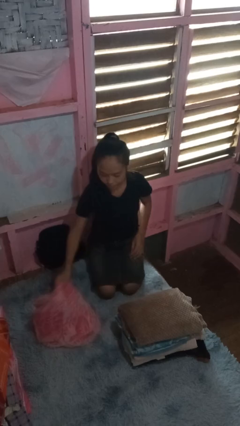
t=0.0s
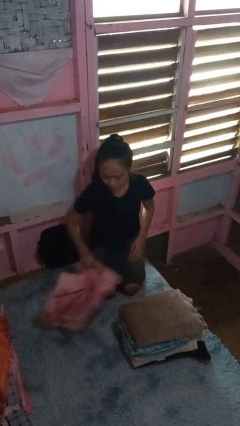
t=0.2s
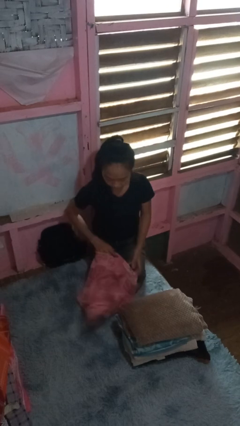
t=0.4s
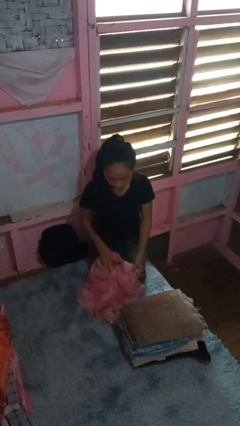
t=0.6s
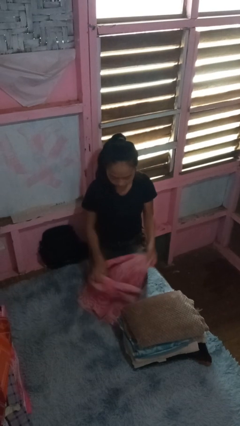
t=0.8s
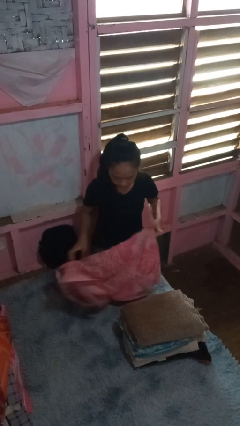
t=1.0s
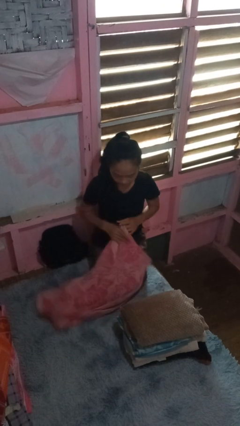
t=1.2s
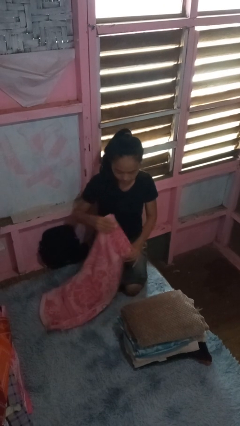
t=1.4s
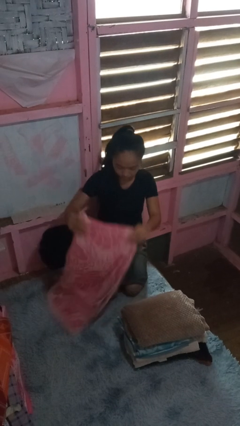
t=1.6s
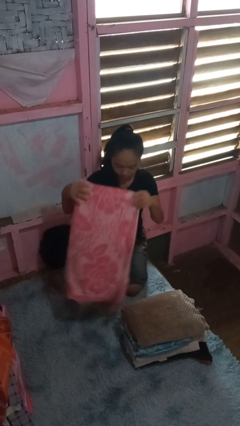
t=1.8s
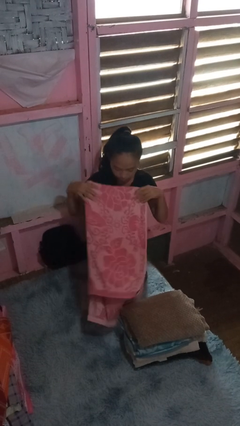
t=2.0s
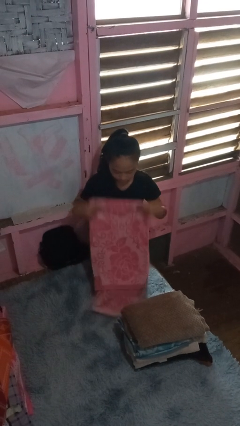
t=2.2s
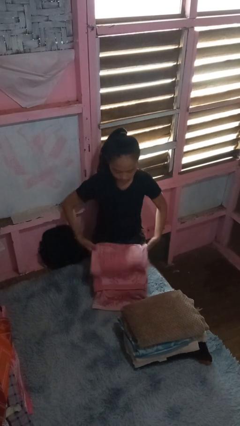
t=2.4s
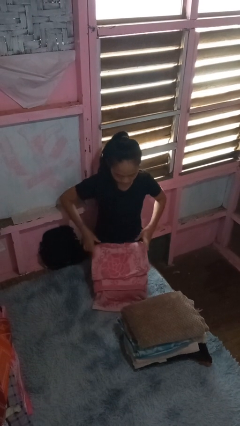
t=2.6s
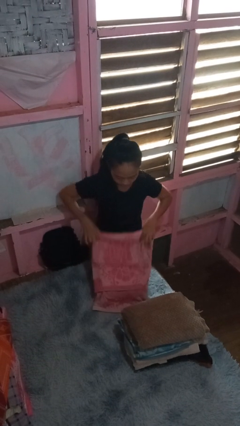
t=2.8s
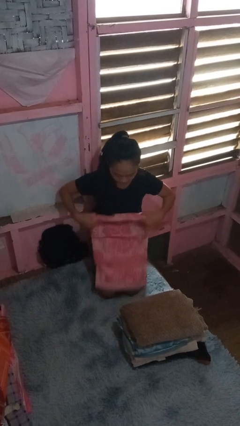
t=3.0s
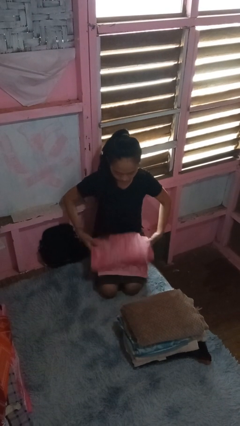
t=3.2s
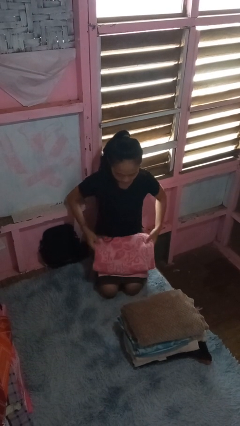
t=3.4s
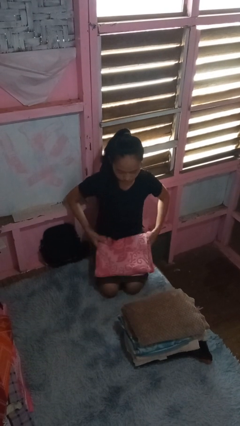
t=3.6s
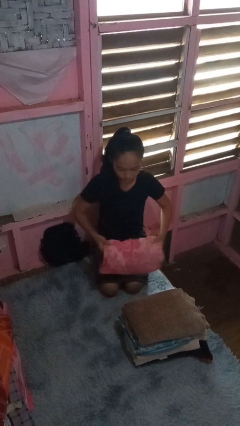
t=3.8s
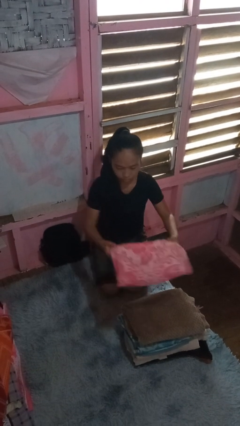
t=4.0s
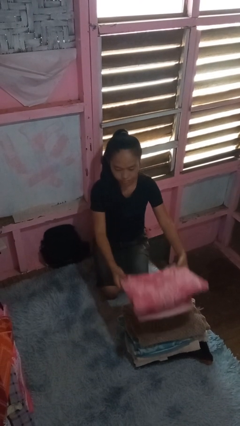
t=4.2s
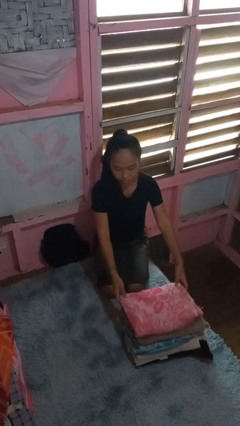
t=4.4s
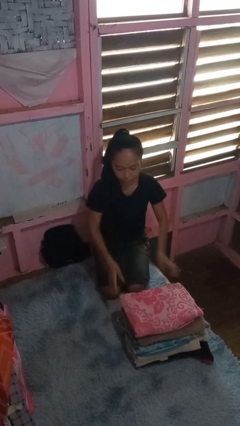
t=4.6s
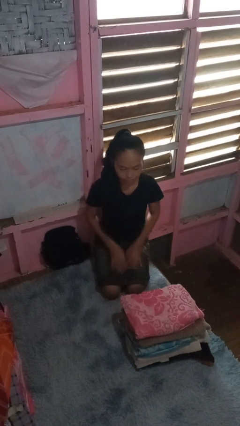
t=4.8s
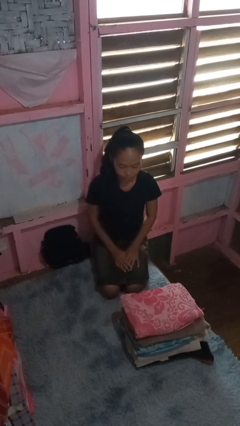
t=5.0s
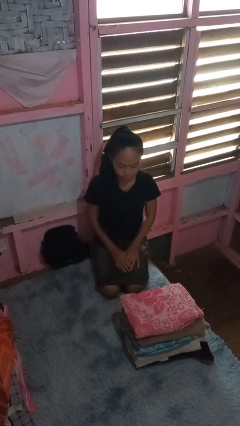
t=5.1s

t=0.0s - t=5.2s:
person folds towel

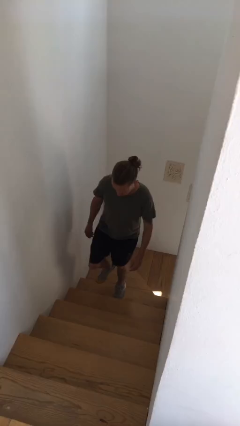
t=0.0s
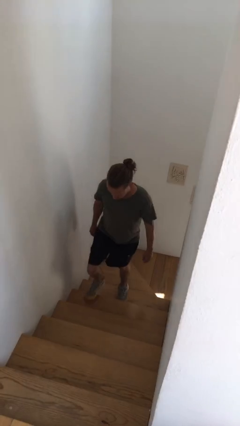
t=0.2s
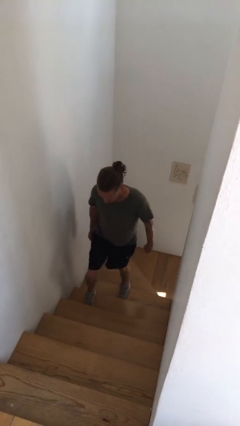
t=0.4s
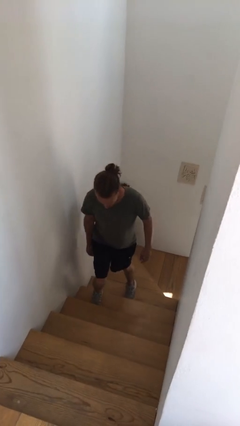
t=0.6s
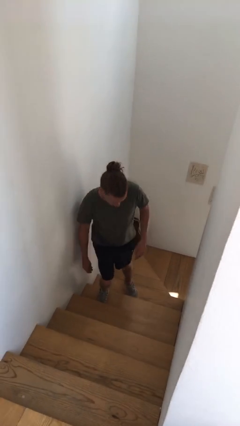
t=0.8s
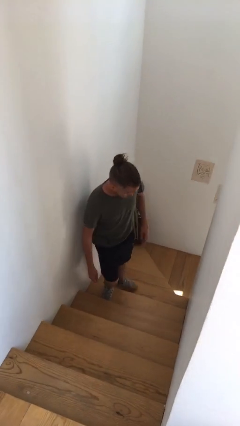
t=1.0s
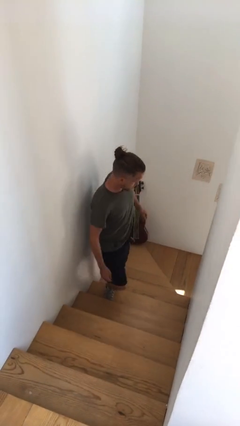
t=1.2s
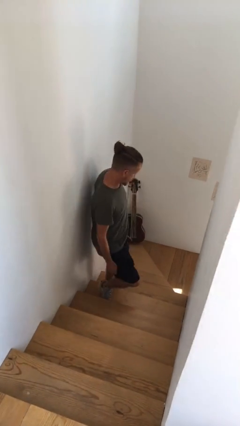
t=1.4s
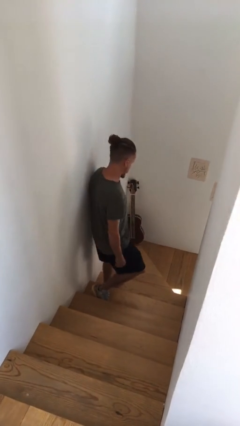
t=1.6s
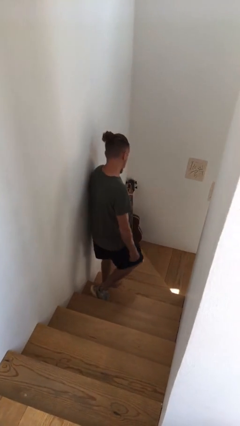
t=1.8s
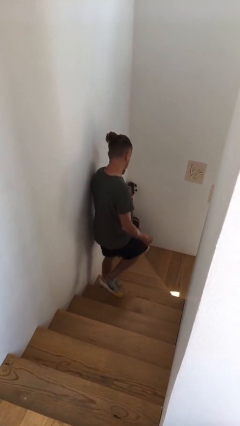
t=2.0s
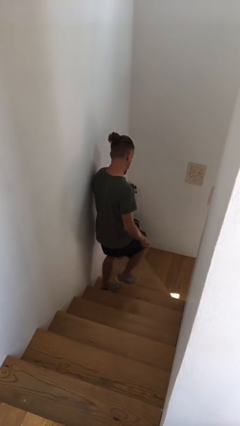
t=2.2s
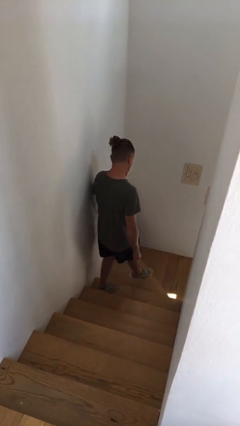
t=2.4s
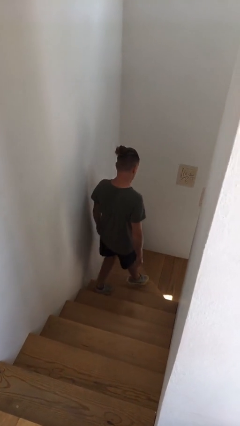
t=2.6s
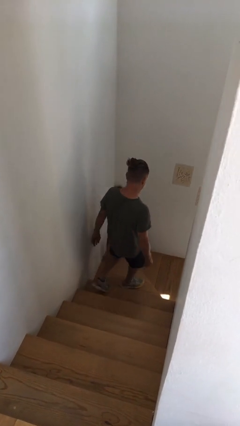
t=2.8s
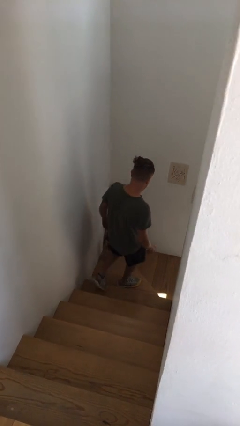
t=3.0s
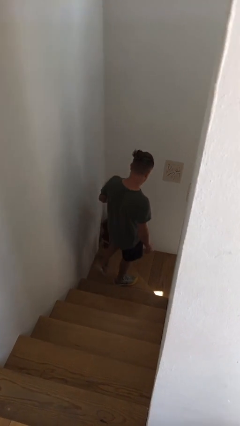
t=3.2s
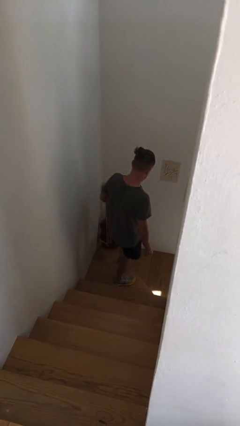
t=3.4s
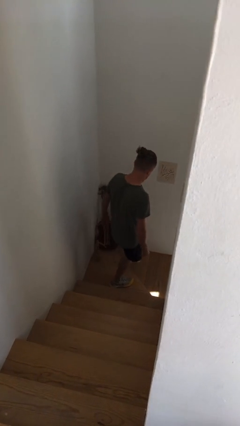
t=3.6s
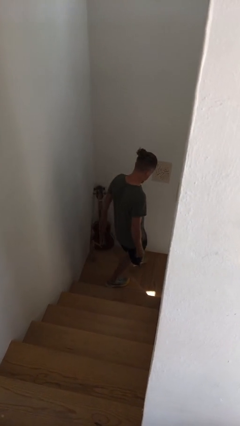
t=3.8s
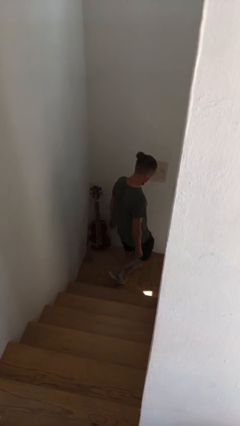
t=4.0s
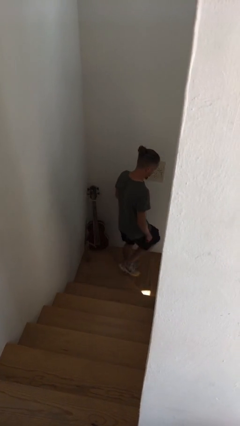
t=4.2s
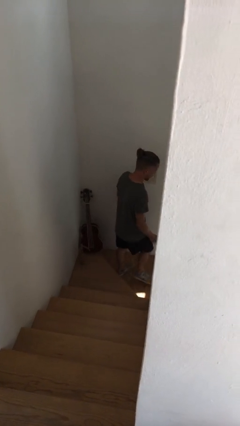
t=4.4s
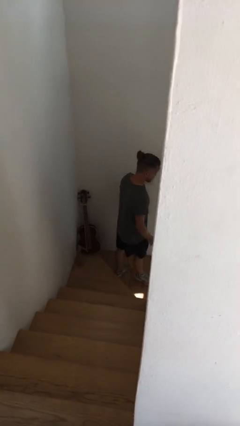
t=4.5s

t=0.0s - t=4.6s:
person climbs down stairs

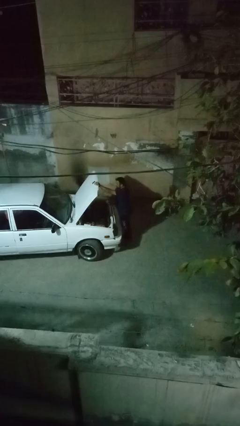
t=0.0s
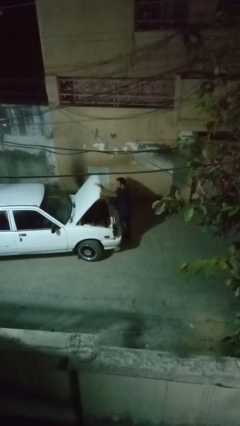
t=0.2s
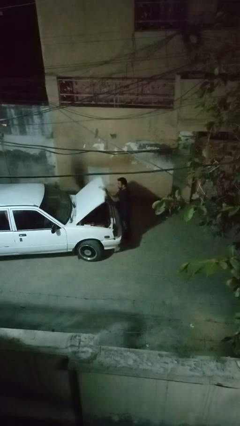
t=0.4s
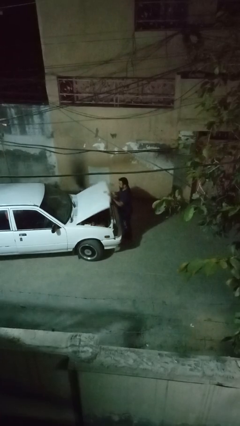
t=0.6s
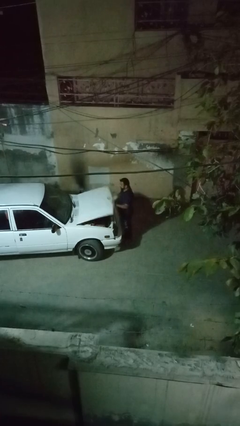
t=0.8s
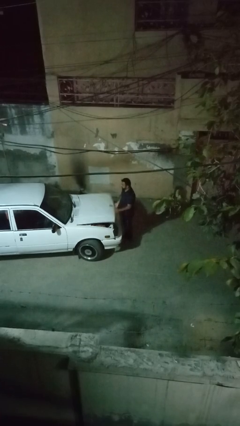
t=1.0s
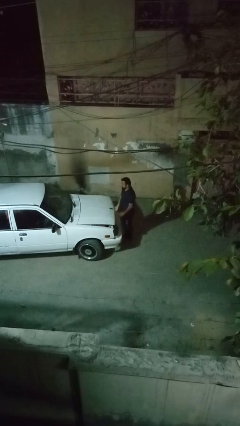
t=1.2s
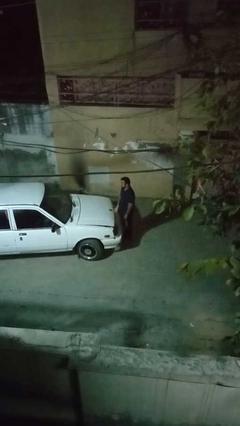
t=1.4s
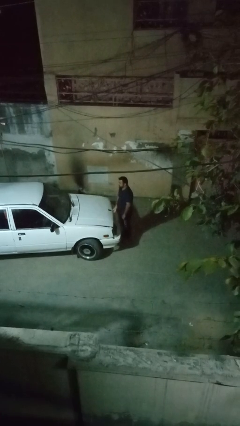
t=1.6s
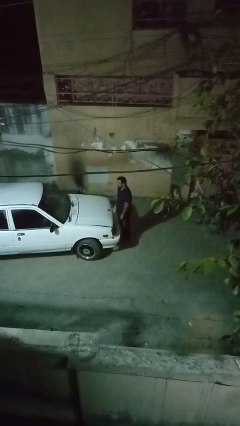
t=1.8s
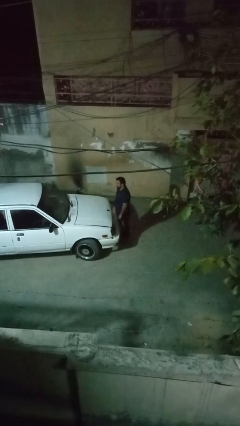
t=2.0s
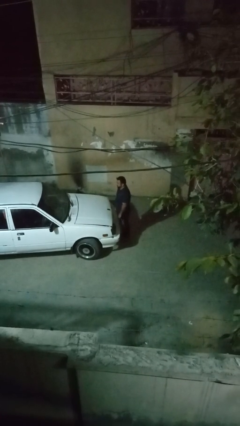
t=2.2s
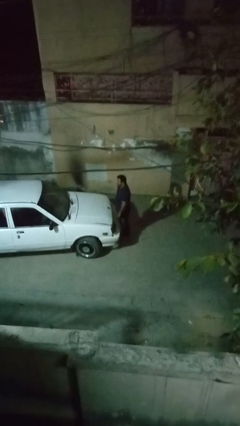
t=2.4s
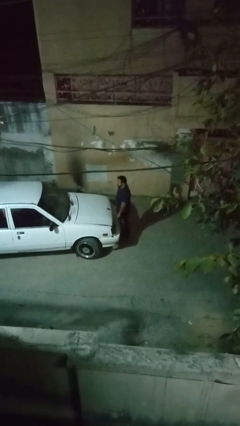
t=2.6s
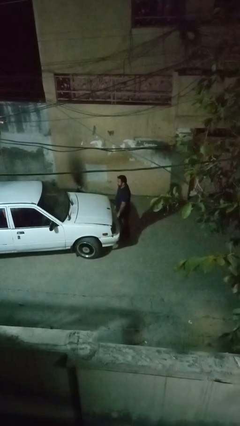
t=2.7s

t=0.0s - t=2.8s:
person closes car hood

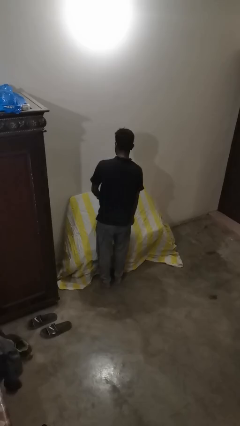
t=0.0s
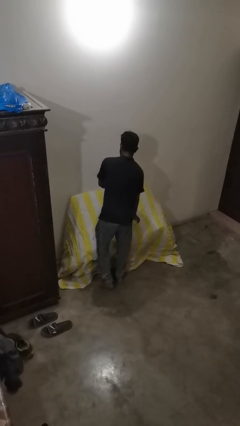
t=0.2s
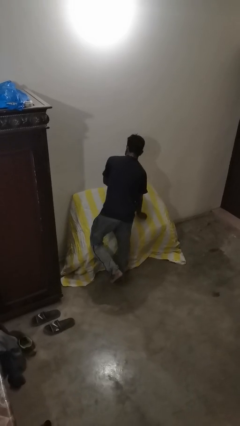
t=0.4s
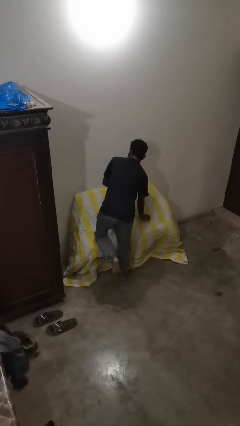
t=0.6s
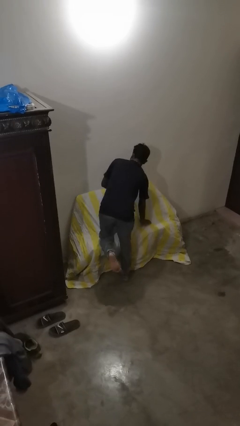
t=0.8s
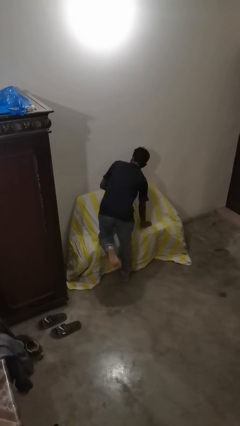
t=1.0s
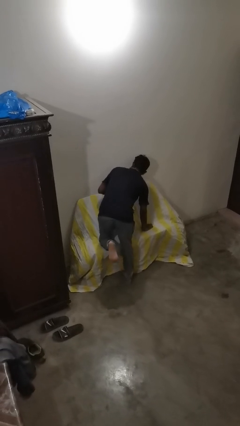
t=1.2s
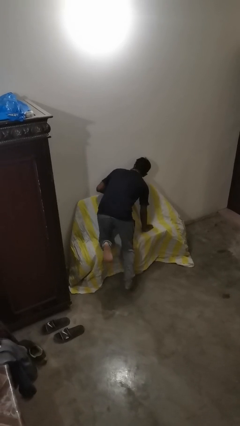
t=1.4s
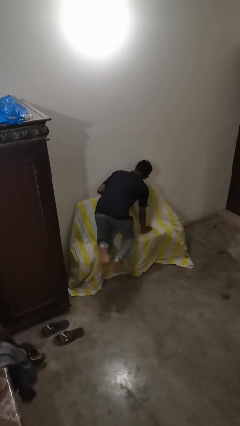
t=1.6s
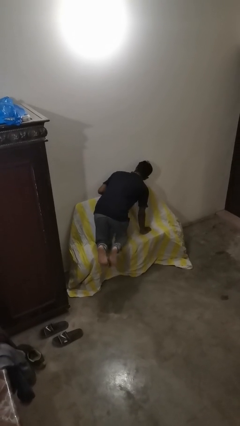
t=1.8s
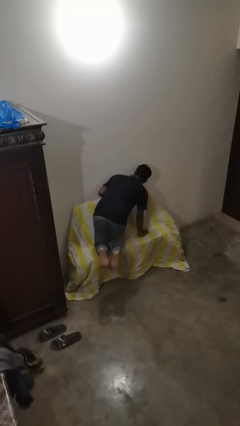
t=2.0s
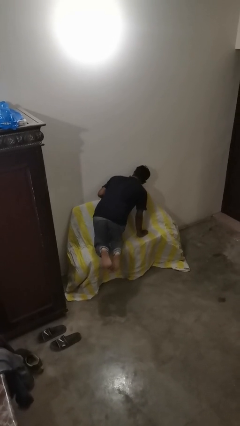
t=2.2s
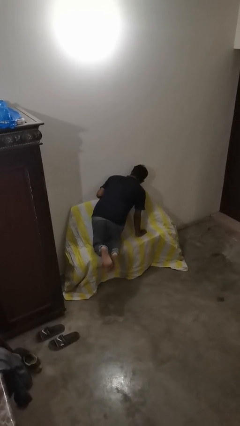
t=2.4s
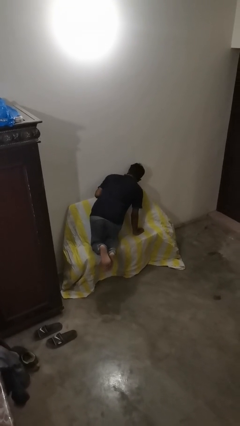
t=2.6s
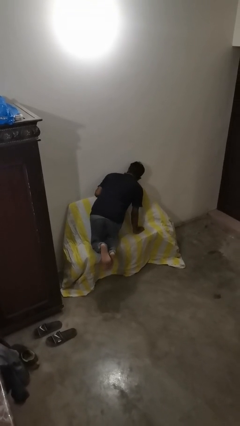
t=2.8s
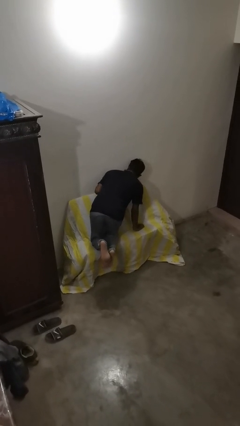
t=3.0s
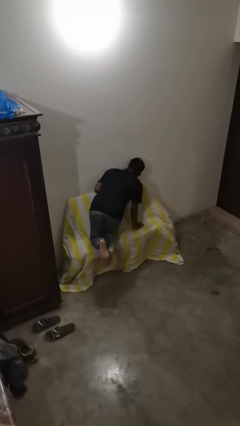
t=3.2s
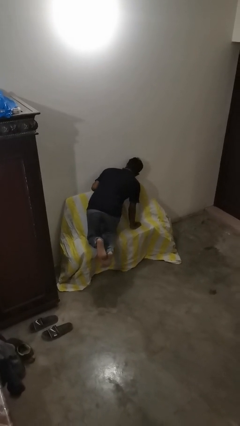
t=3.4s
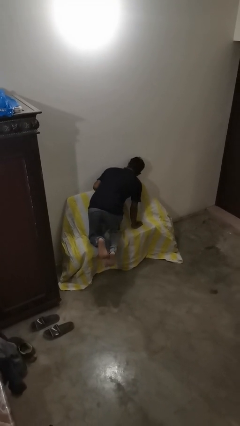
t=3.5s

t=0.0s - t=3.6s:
person lies down on couch

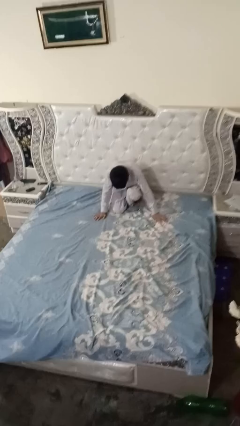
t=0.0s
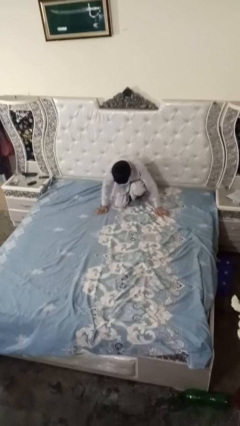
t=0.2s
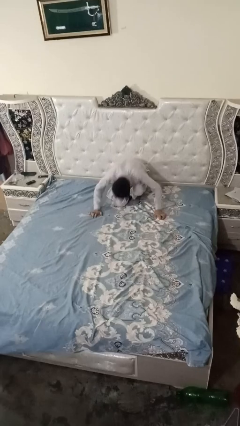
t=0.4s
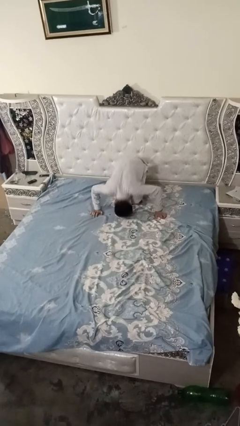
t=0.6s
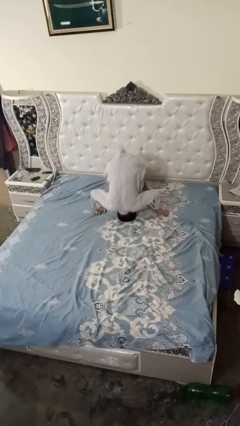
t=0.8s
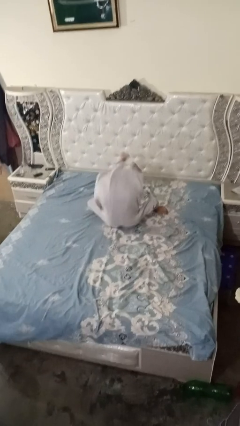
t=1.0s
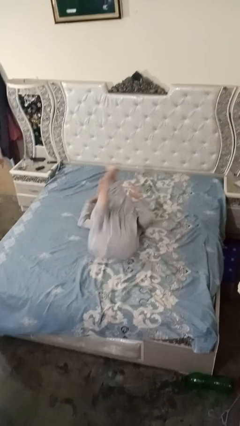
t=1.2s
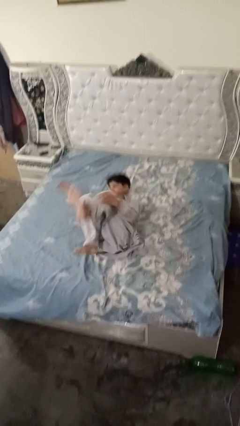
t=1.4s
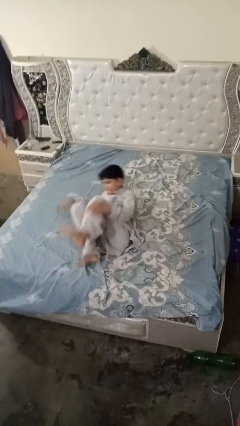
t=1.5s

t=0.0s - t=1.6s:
person somersaults
